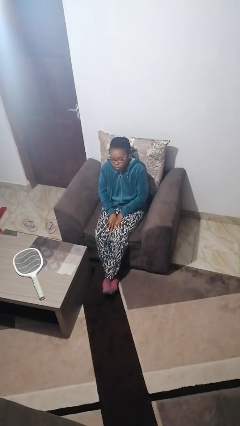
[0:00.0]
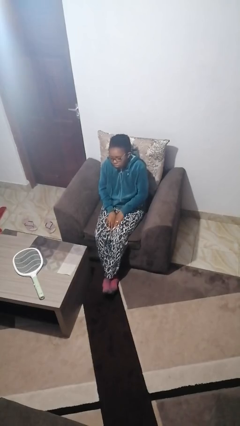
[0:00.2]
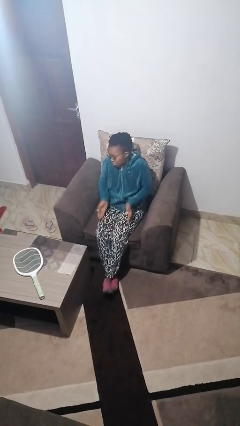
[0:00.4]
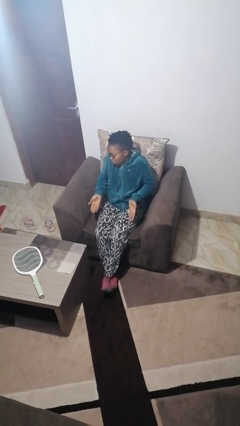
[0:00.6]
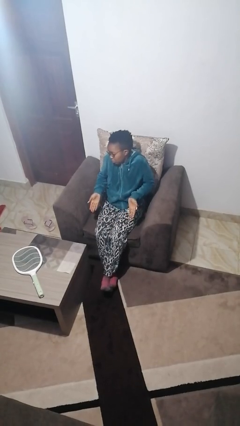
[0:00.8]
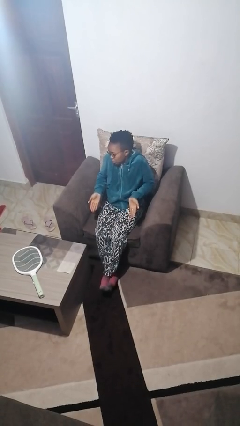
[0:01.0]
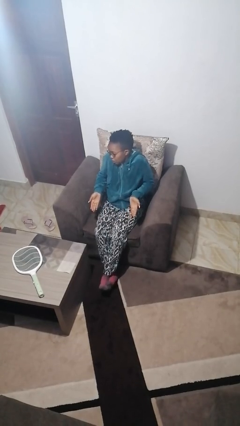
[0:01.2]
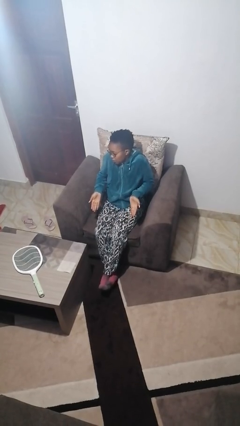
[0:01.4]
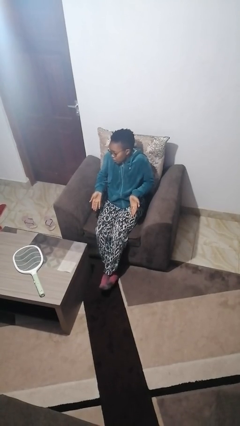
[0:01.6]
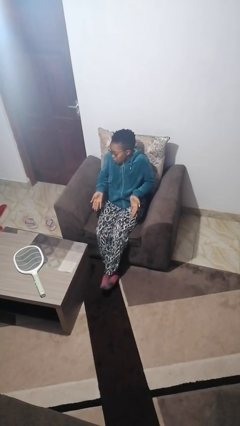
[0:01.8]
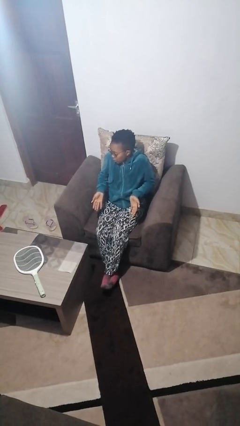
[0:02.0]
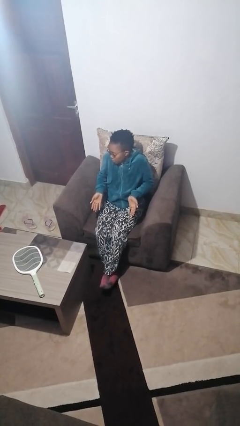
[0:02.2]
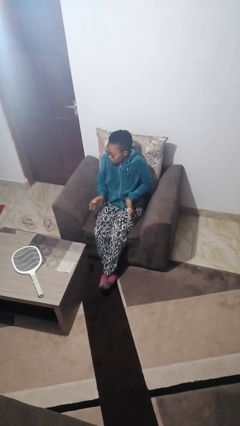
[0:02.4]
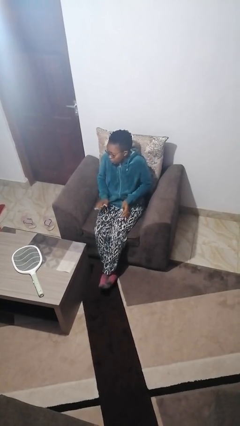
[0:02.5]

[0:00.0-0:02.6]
person shrugs

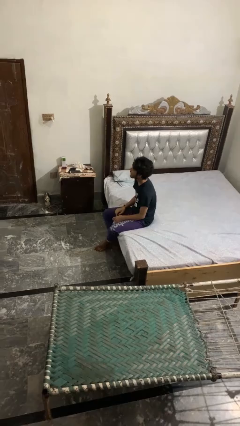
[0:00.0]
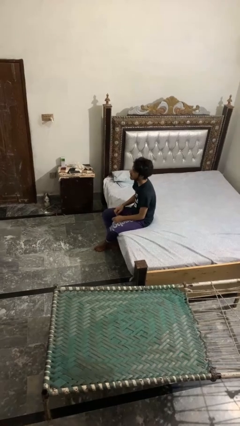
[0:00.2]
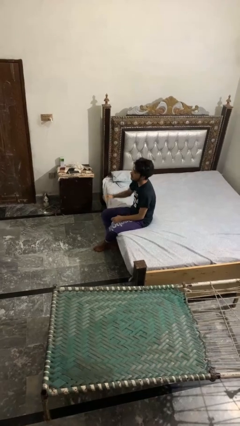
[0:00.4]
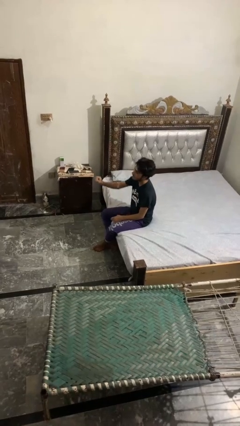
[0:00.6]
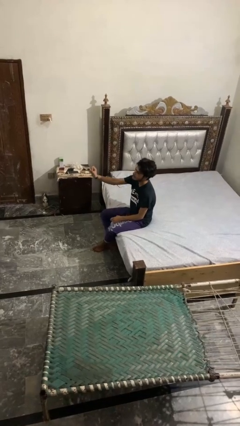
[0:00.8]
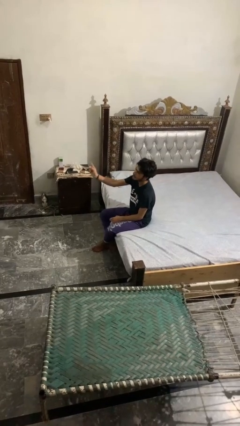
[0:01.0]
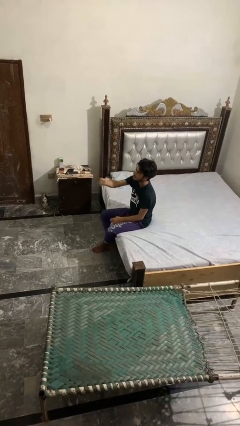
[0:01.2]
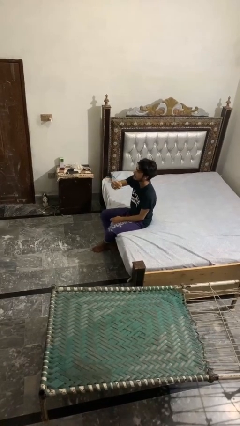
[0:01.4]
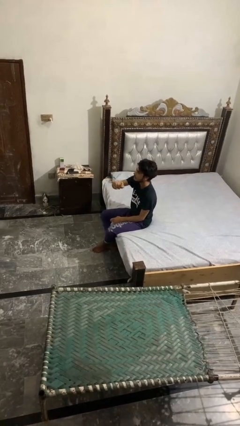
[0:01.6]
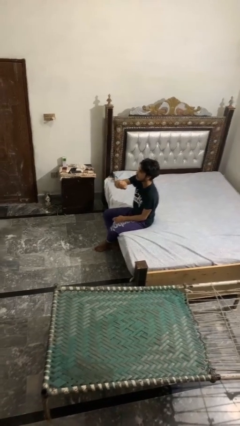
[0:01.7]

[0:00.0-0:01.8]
person gestures swipe left

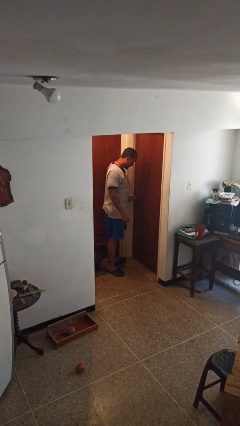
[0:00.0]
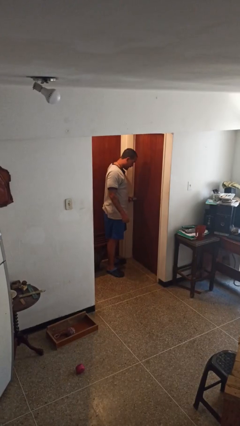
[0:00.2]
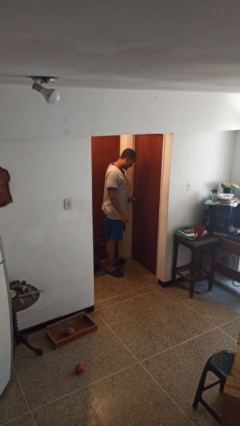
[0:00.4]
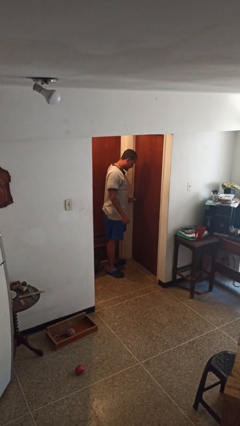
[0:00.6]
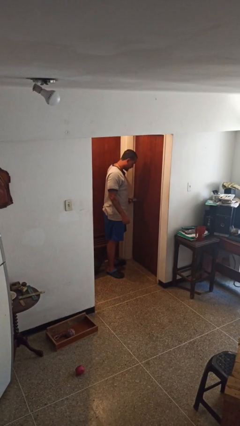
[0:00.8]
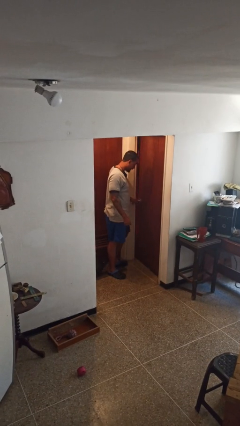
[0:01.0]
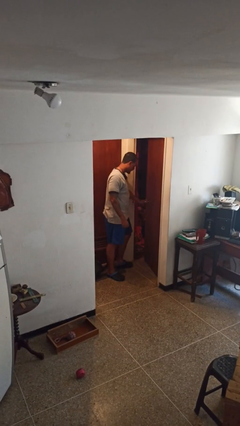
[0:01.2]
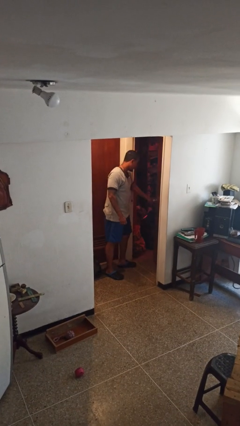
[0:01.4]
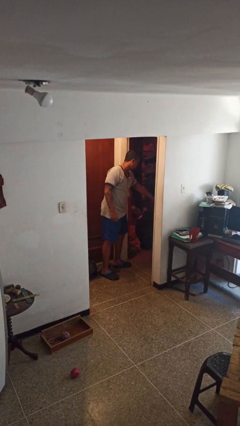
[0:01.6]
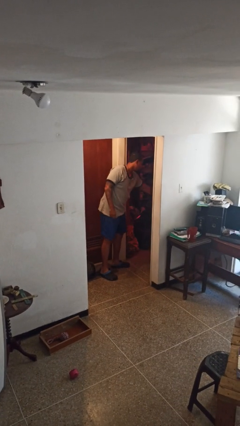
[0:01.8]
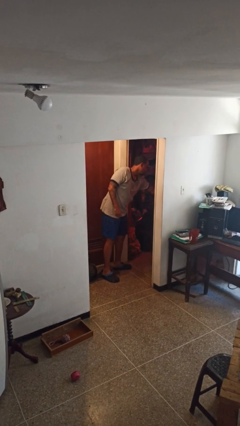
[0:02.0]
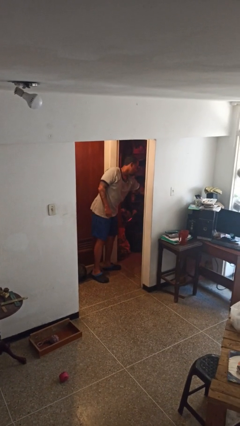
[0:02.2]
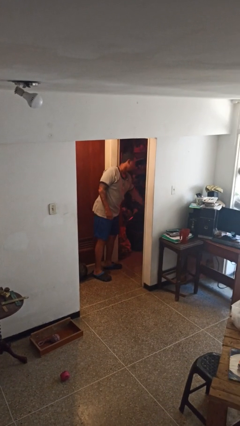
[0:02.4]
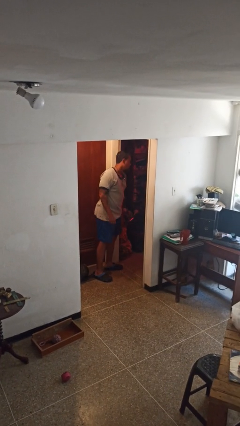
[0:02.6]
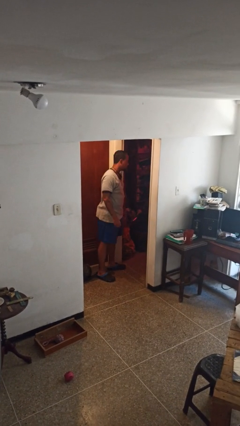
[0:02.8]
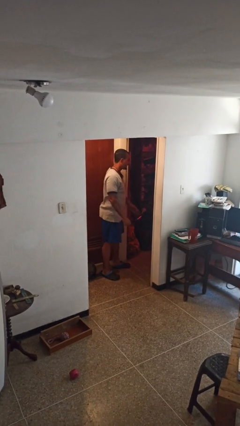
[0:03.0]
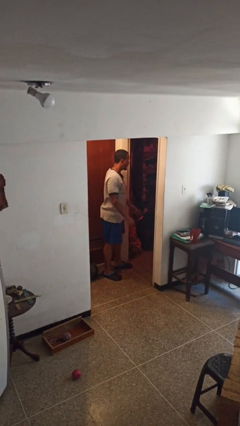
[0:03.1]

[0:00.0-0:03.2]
person opens facility door

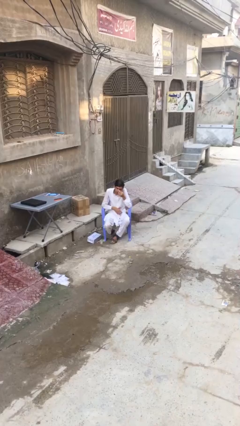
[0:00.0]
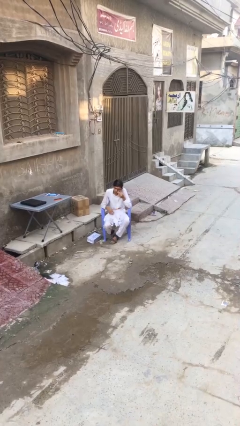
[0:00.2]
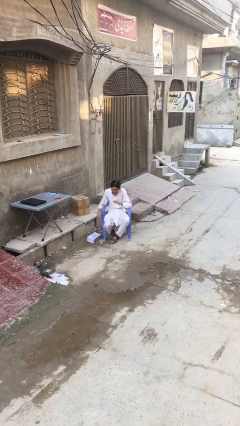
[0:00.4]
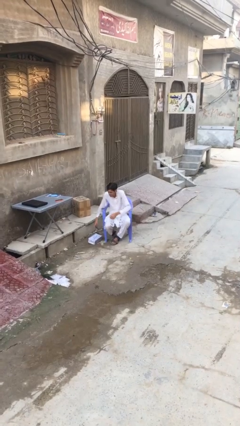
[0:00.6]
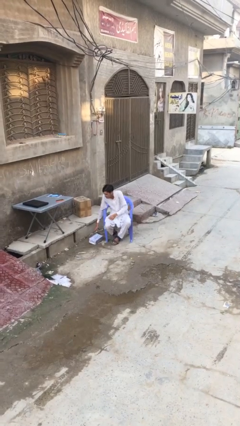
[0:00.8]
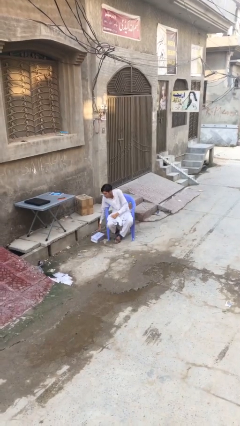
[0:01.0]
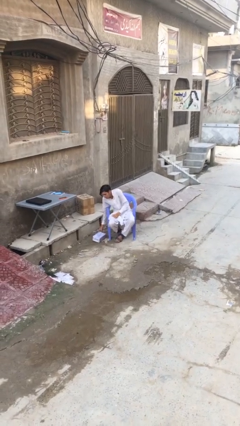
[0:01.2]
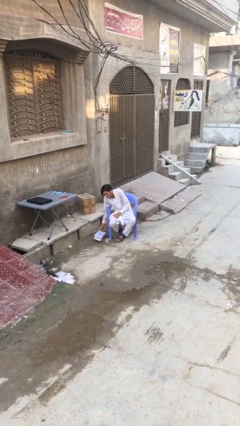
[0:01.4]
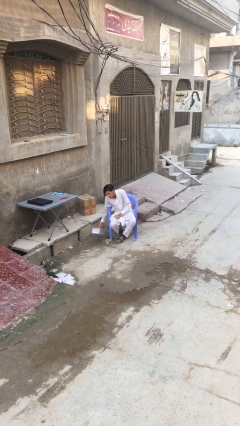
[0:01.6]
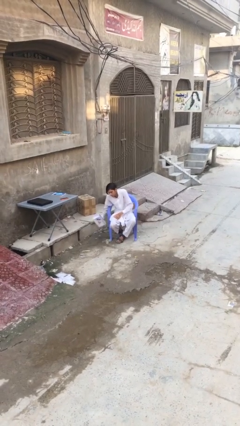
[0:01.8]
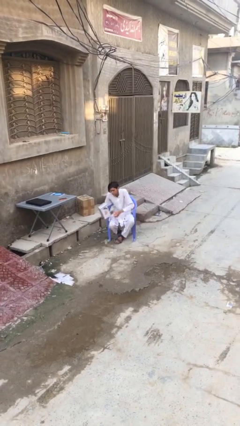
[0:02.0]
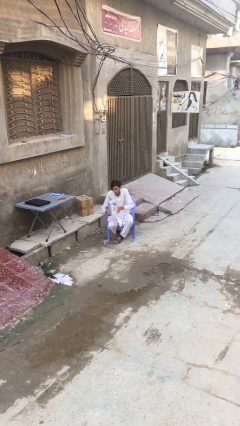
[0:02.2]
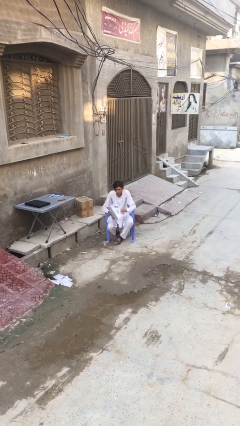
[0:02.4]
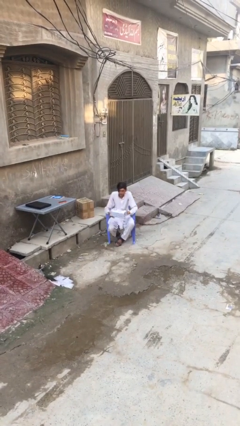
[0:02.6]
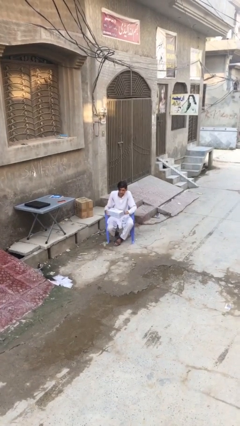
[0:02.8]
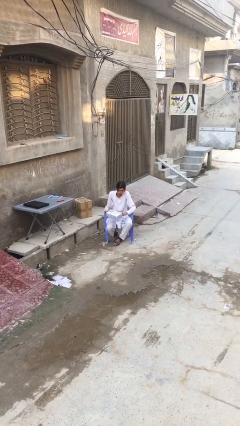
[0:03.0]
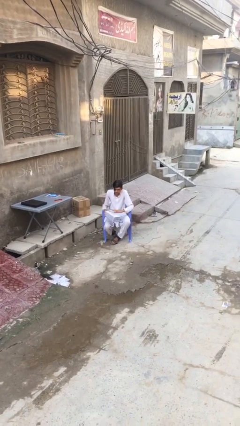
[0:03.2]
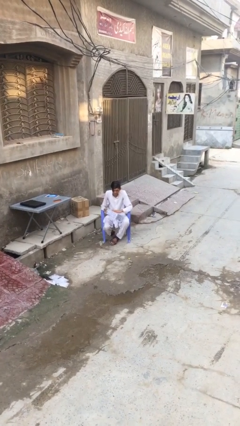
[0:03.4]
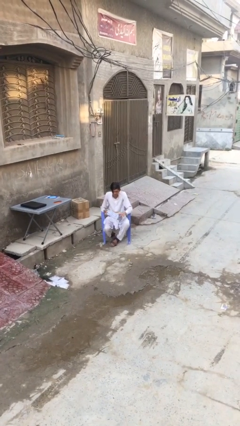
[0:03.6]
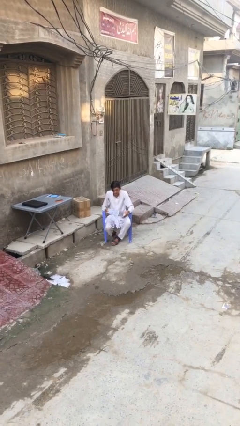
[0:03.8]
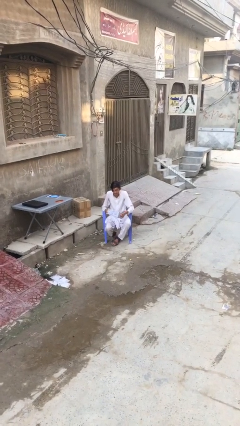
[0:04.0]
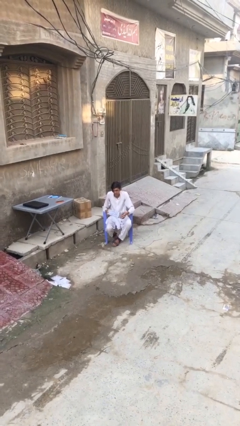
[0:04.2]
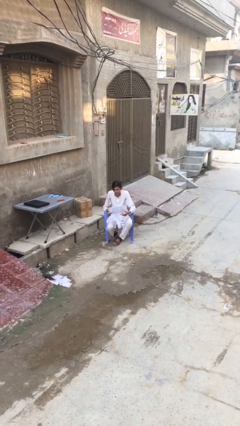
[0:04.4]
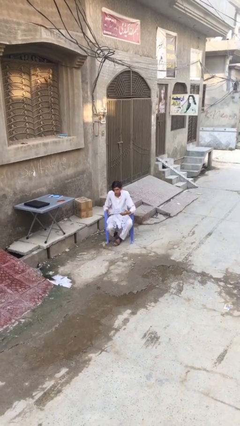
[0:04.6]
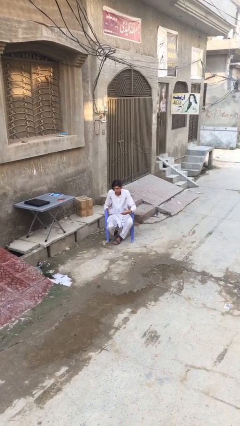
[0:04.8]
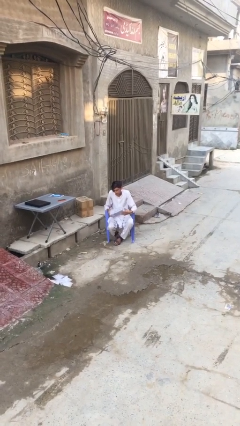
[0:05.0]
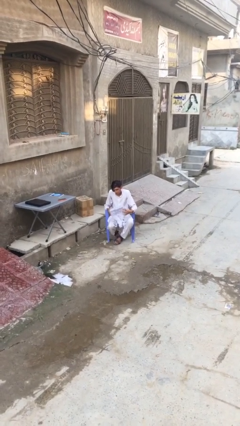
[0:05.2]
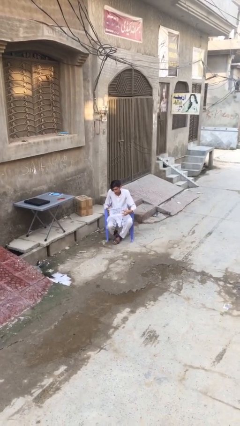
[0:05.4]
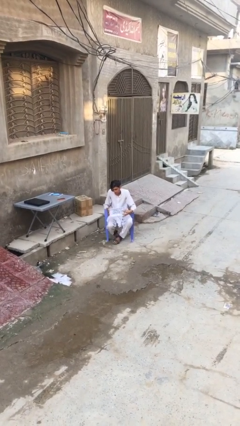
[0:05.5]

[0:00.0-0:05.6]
person picks up object from floor

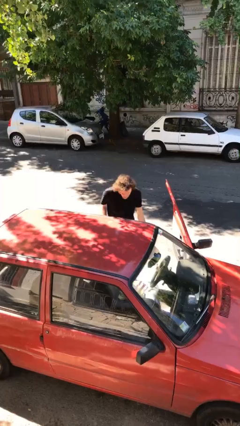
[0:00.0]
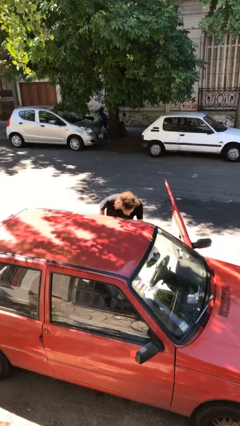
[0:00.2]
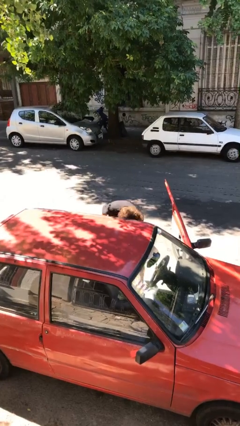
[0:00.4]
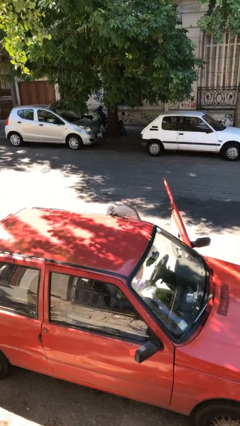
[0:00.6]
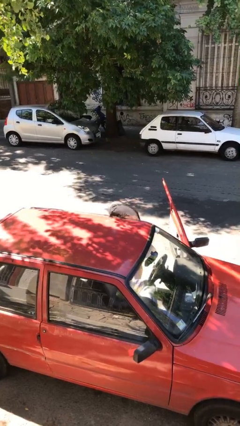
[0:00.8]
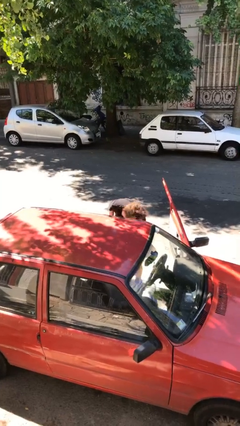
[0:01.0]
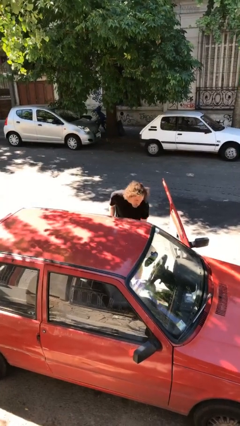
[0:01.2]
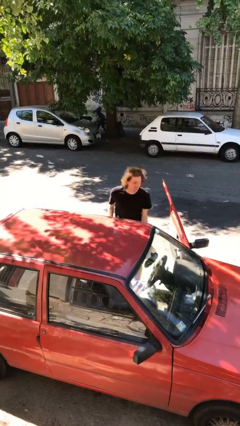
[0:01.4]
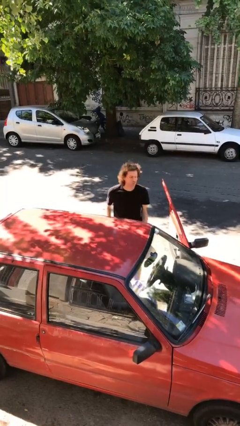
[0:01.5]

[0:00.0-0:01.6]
person unloads car

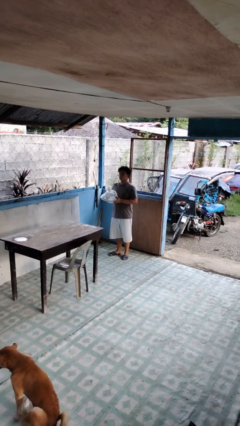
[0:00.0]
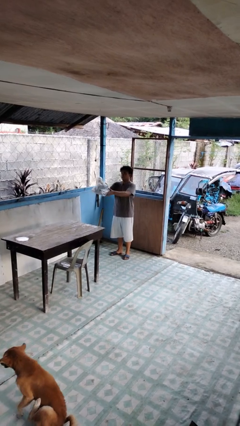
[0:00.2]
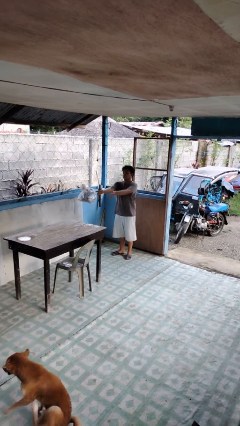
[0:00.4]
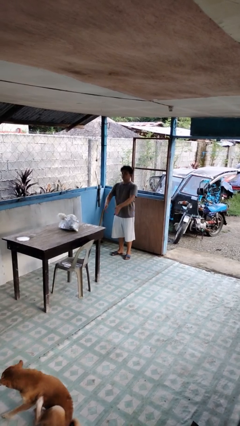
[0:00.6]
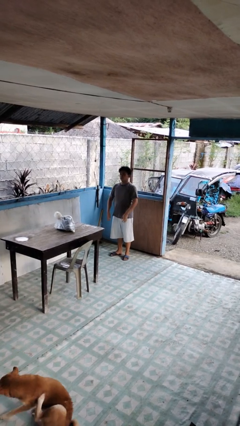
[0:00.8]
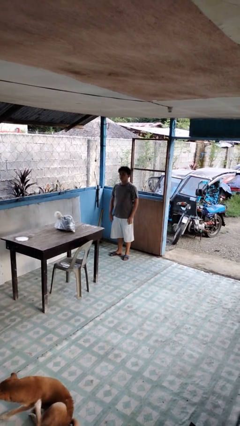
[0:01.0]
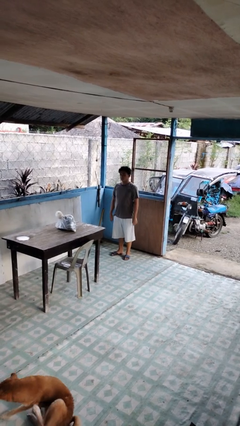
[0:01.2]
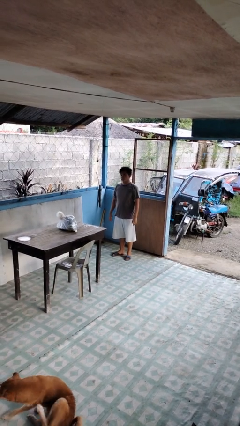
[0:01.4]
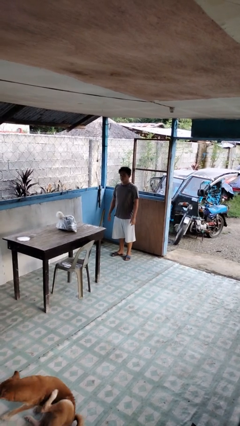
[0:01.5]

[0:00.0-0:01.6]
person throws object on table

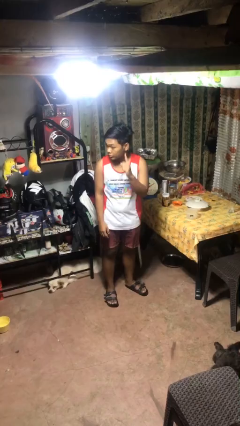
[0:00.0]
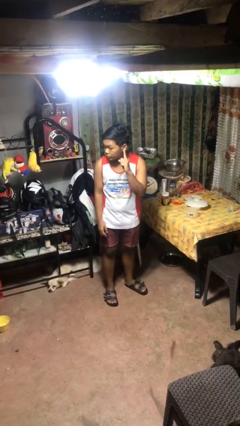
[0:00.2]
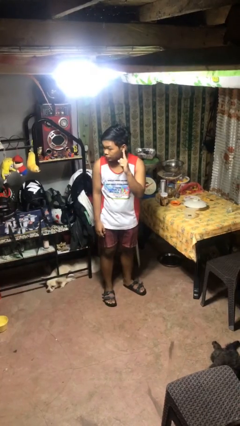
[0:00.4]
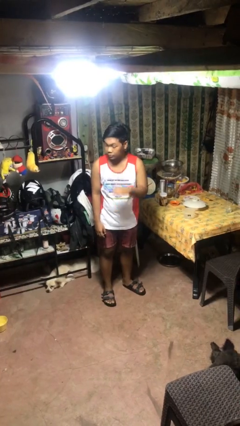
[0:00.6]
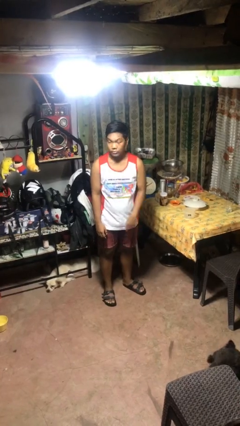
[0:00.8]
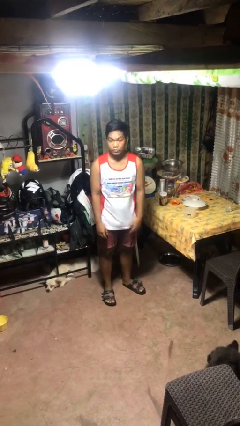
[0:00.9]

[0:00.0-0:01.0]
person gestures listen closely
